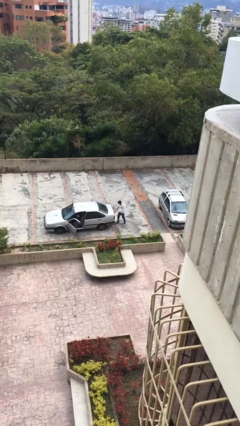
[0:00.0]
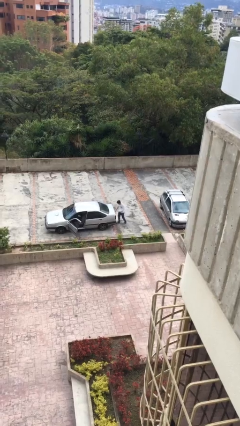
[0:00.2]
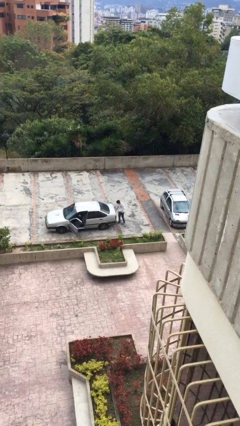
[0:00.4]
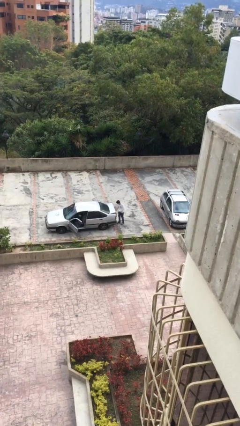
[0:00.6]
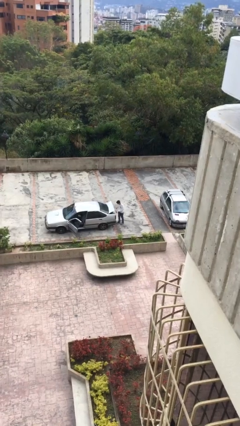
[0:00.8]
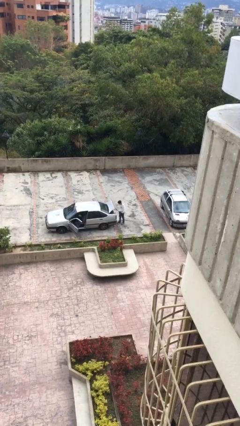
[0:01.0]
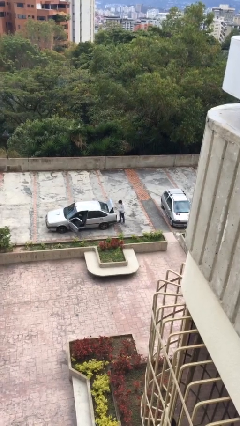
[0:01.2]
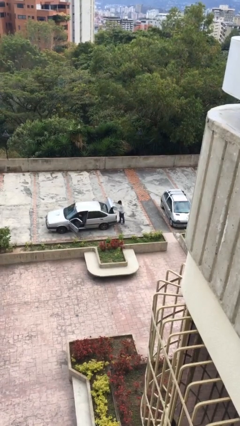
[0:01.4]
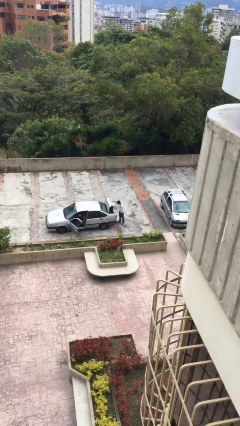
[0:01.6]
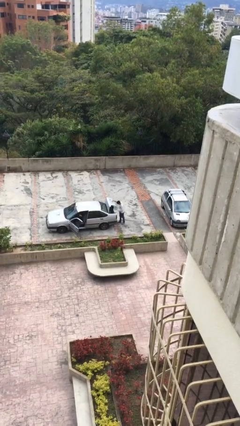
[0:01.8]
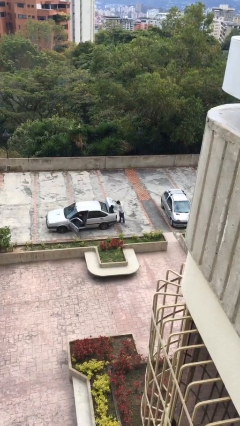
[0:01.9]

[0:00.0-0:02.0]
person opens car trunk

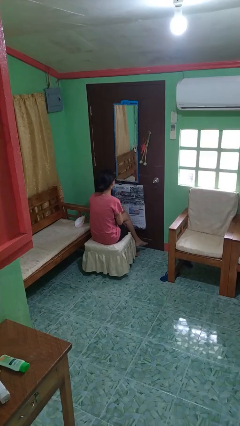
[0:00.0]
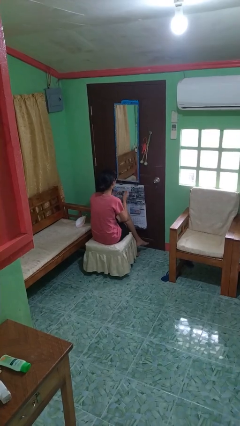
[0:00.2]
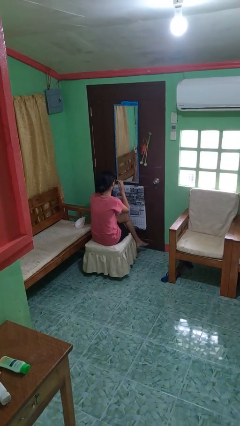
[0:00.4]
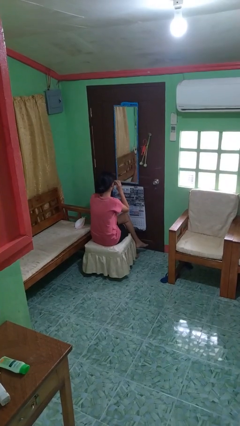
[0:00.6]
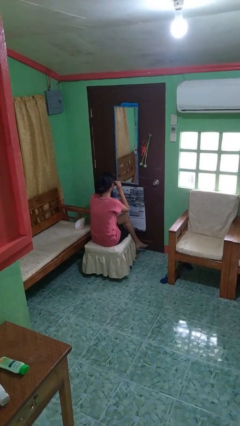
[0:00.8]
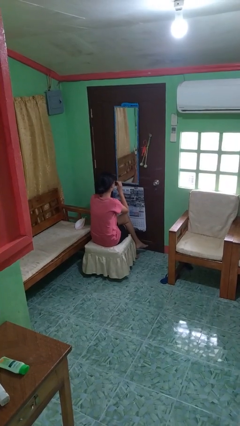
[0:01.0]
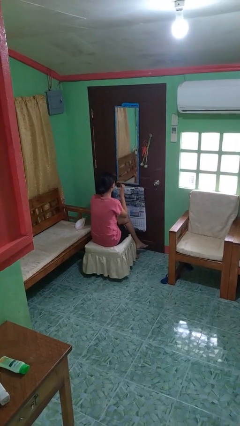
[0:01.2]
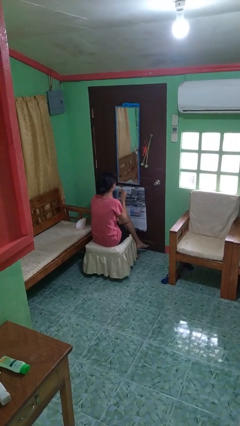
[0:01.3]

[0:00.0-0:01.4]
person takes off sunglasses

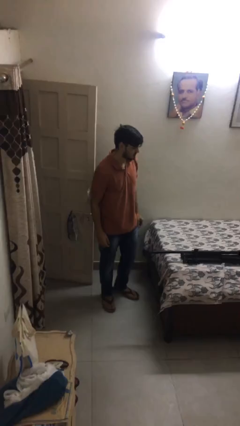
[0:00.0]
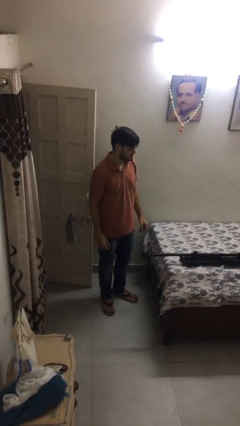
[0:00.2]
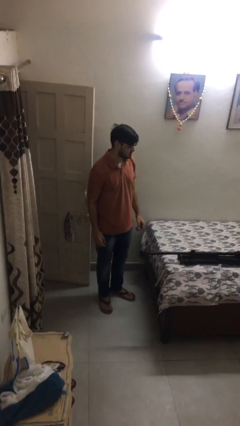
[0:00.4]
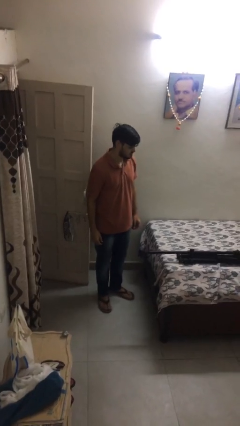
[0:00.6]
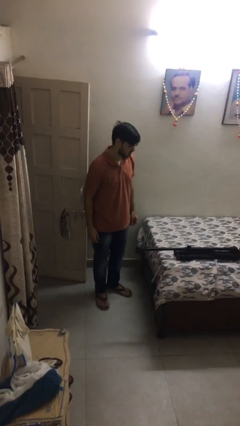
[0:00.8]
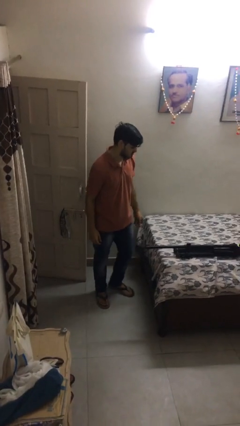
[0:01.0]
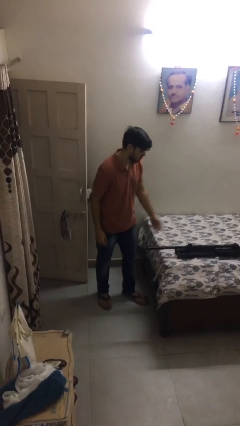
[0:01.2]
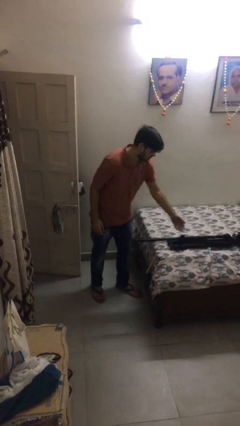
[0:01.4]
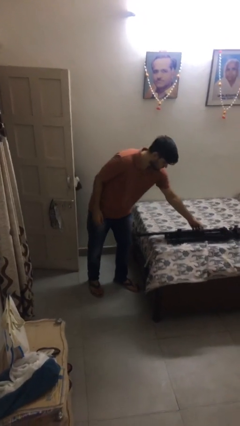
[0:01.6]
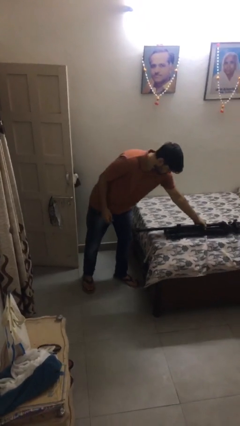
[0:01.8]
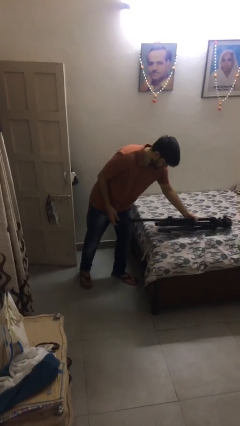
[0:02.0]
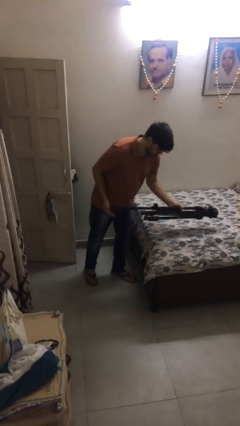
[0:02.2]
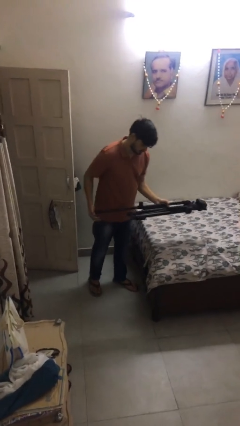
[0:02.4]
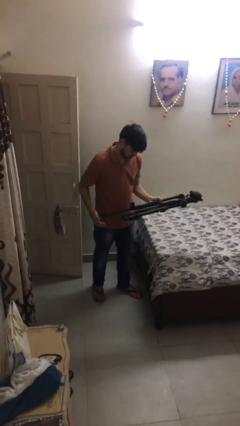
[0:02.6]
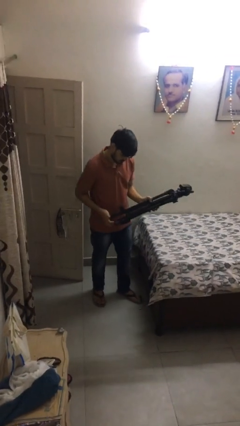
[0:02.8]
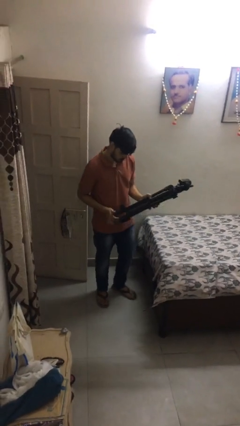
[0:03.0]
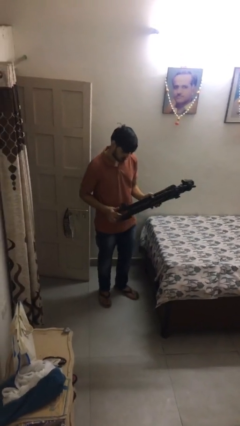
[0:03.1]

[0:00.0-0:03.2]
person picks up object from bed

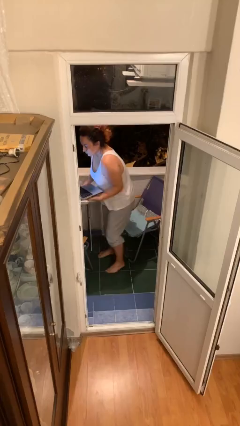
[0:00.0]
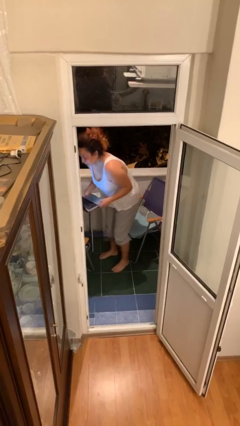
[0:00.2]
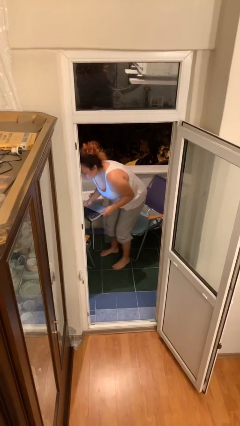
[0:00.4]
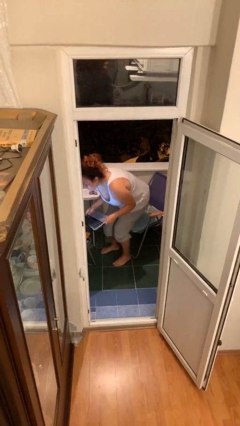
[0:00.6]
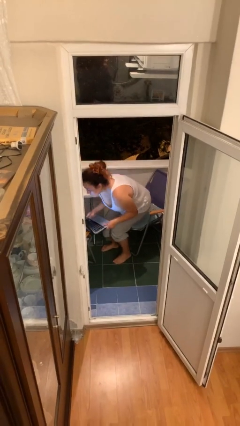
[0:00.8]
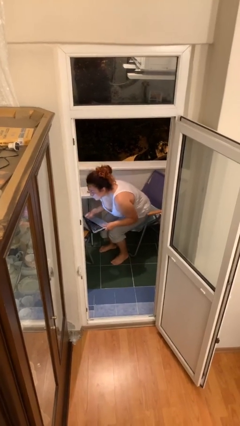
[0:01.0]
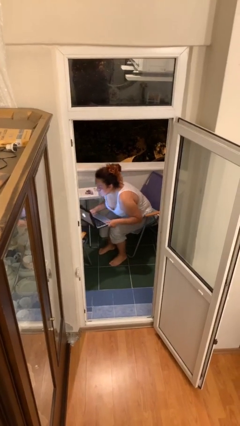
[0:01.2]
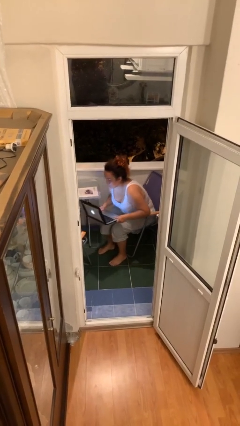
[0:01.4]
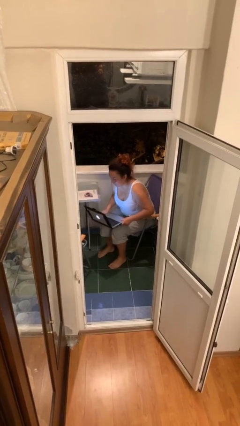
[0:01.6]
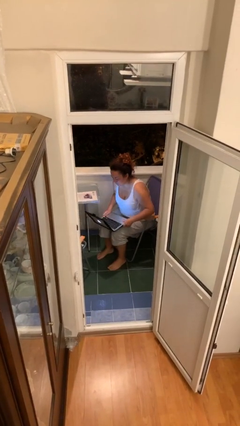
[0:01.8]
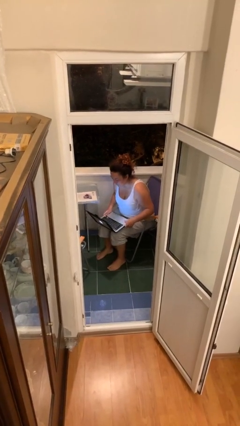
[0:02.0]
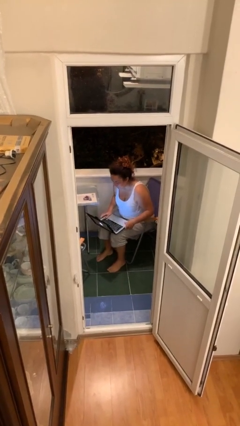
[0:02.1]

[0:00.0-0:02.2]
person sits down

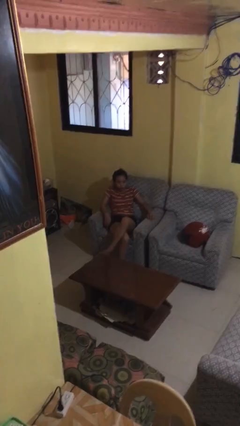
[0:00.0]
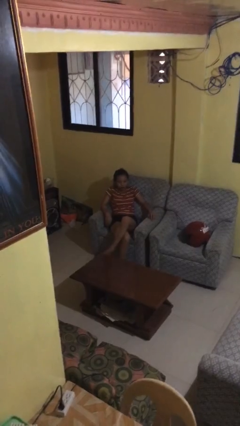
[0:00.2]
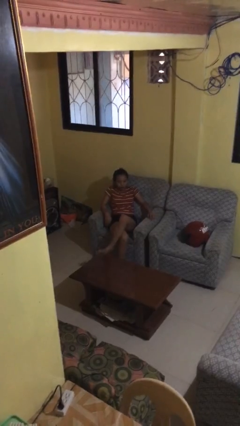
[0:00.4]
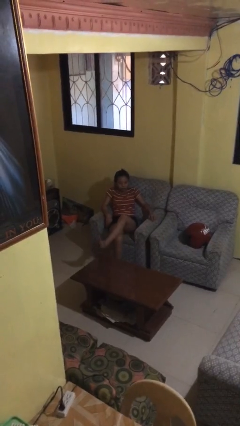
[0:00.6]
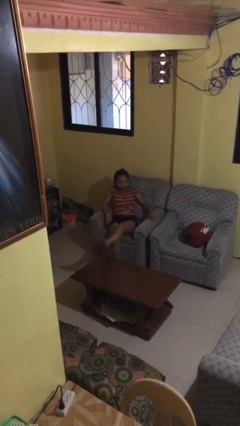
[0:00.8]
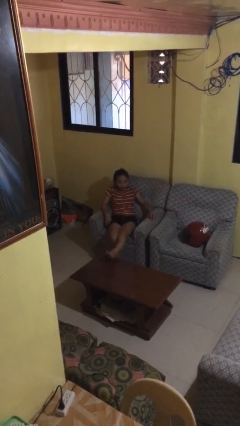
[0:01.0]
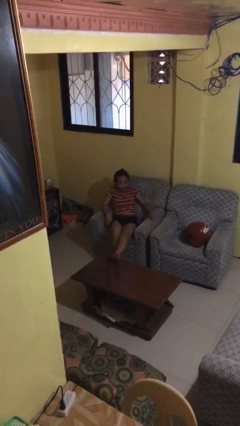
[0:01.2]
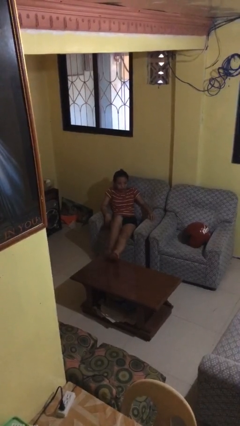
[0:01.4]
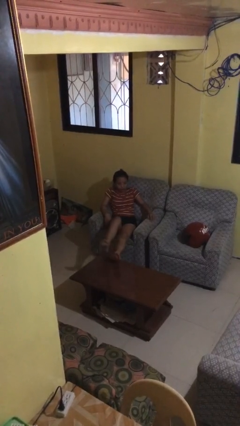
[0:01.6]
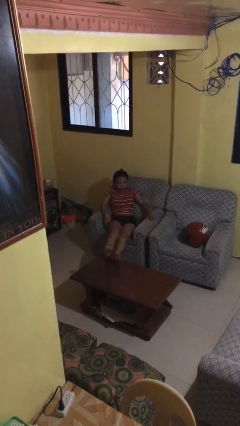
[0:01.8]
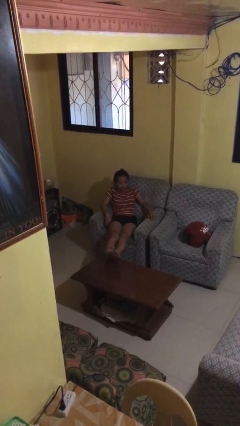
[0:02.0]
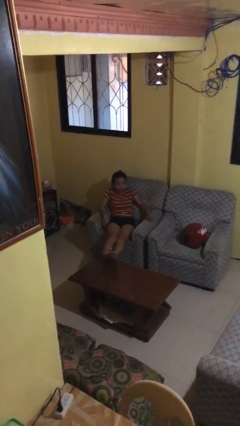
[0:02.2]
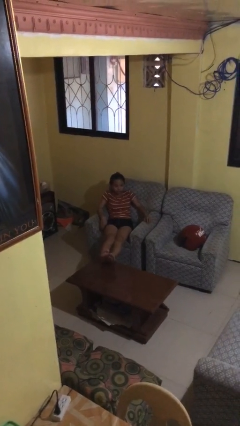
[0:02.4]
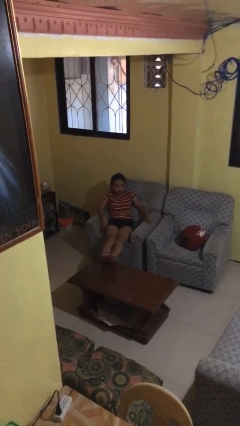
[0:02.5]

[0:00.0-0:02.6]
person puts feet up

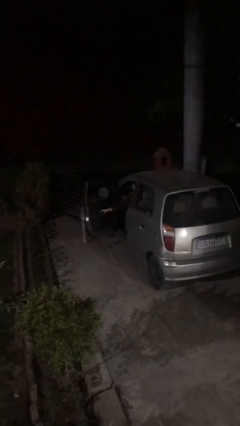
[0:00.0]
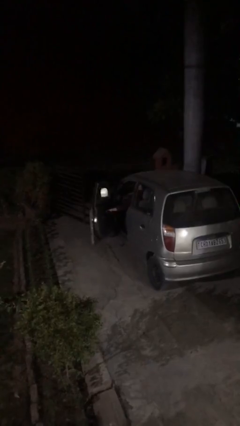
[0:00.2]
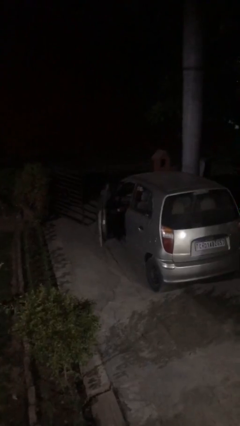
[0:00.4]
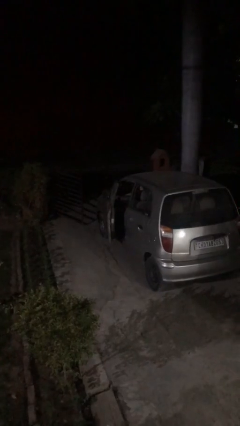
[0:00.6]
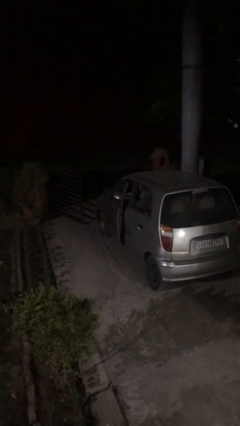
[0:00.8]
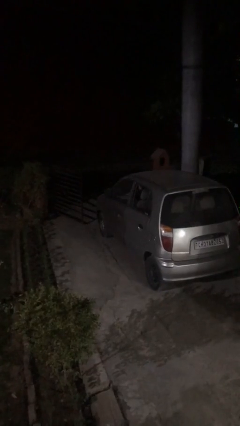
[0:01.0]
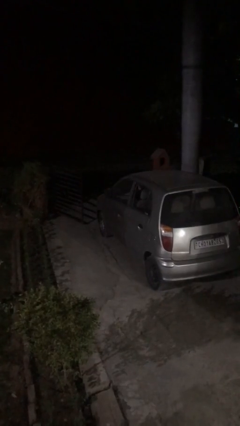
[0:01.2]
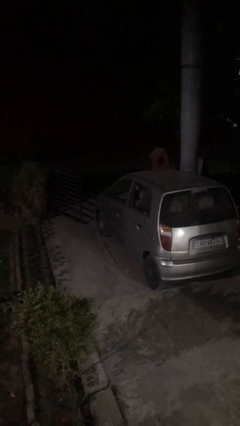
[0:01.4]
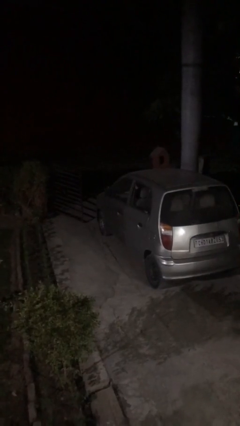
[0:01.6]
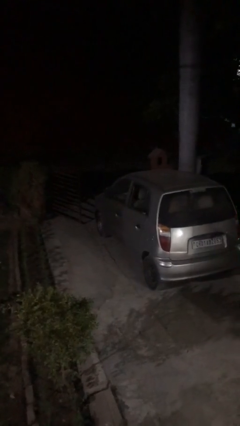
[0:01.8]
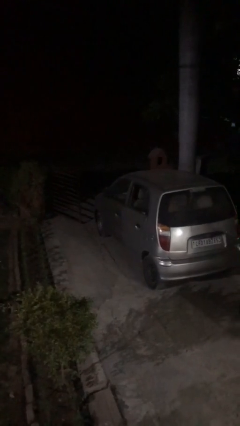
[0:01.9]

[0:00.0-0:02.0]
person closes car door

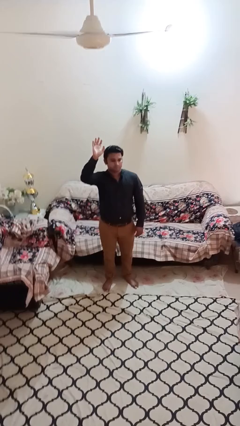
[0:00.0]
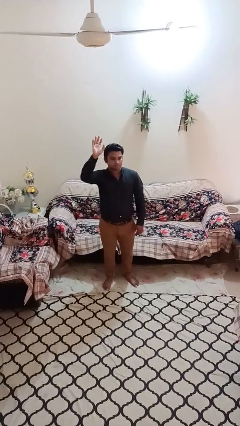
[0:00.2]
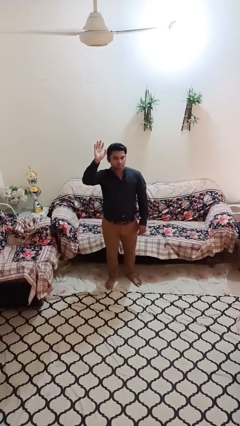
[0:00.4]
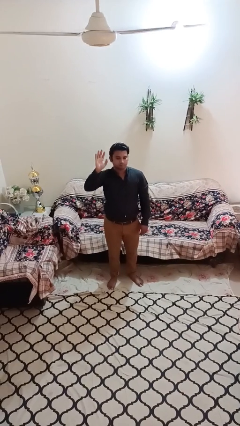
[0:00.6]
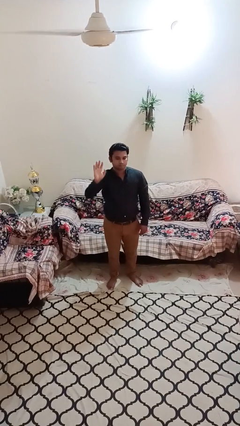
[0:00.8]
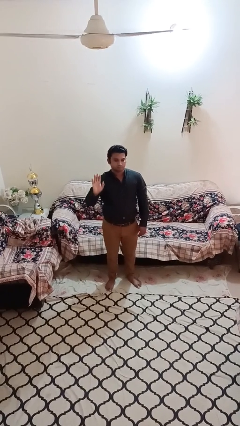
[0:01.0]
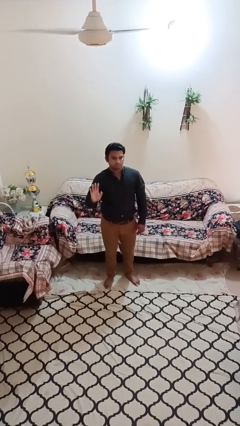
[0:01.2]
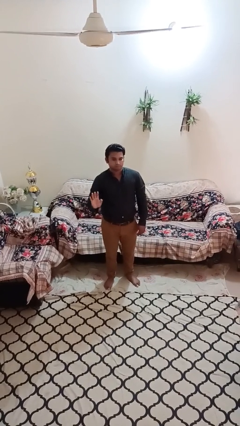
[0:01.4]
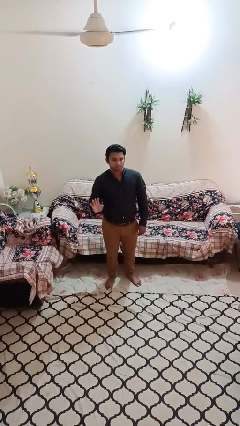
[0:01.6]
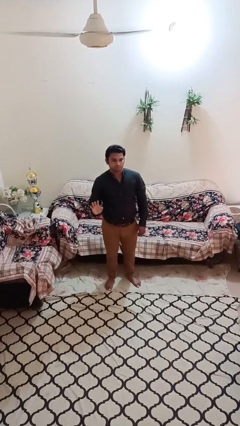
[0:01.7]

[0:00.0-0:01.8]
person gestures lower hand

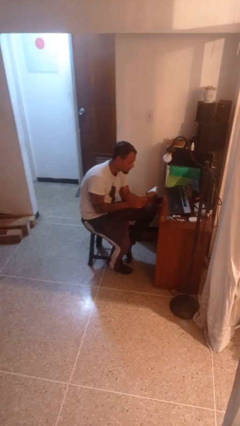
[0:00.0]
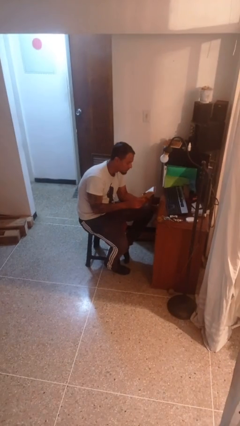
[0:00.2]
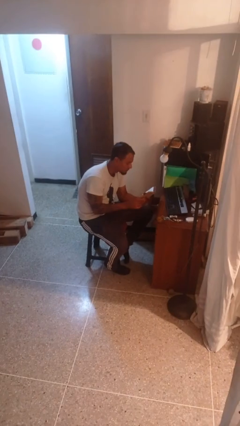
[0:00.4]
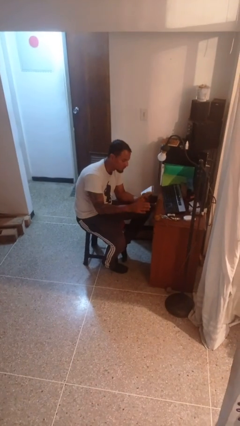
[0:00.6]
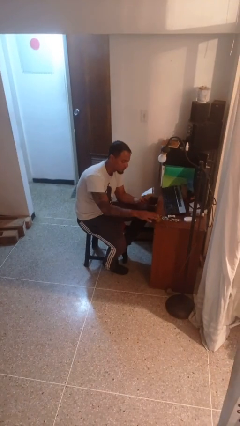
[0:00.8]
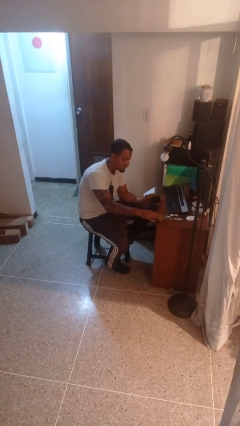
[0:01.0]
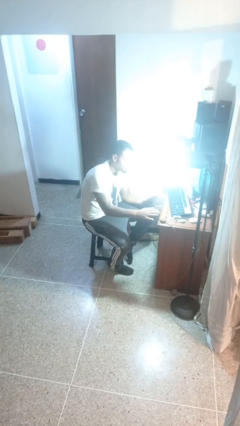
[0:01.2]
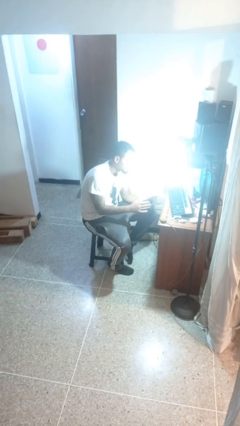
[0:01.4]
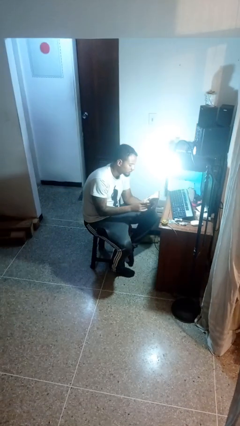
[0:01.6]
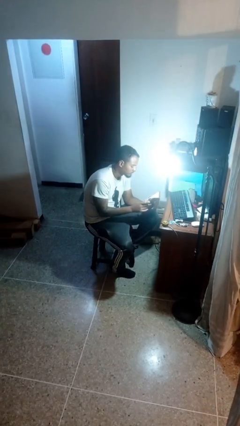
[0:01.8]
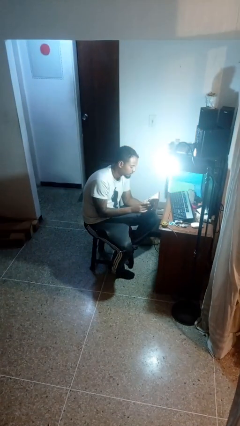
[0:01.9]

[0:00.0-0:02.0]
person turns on lamp
